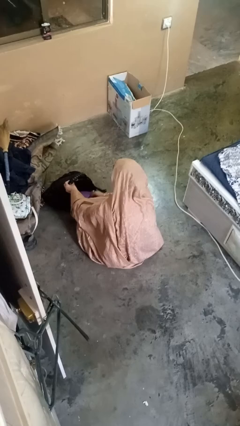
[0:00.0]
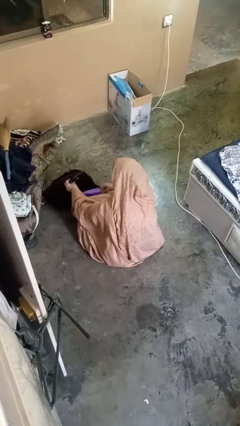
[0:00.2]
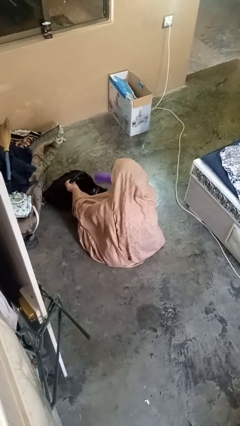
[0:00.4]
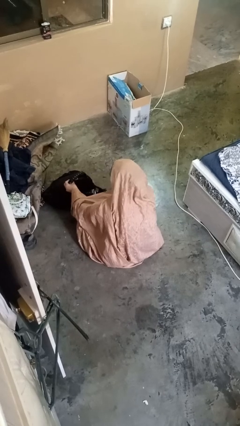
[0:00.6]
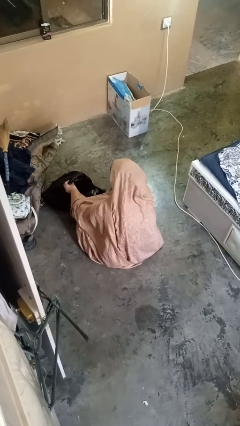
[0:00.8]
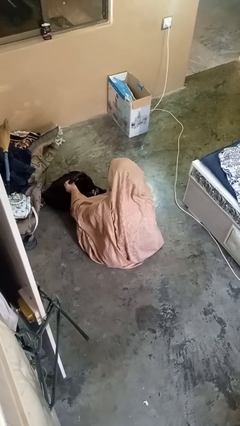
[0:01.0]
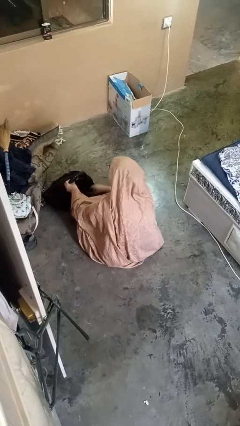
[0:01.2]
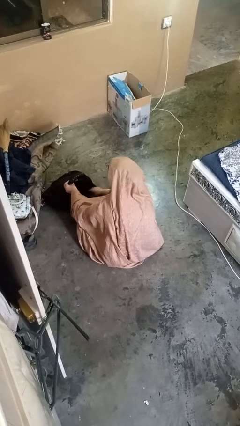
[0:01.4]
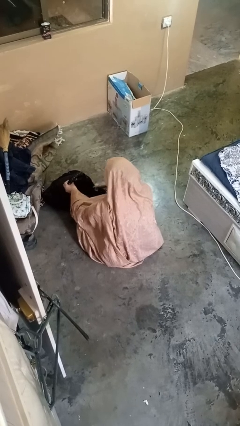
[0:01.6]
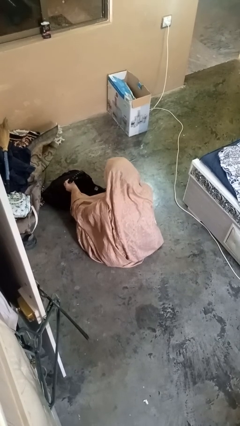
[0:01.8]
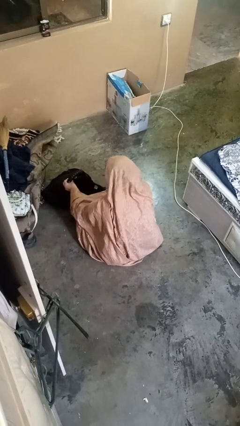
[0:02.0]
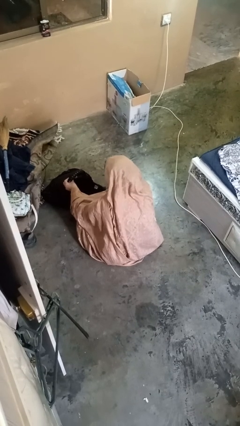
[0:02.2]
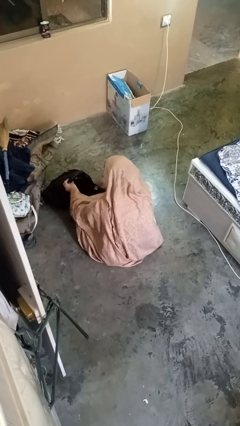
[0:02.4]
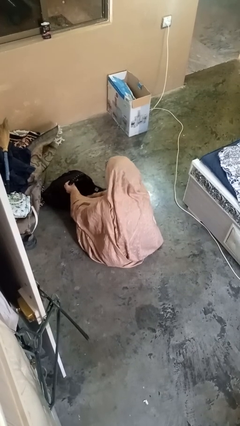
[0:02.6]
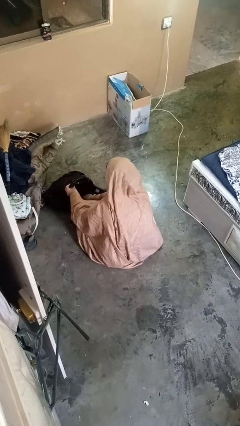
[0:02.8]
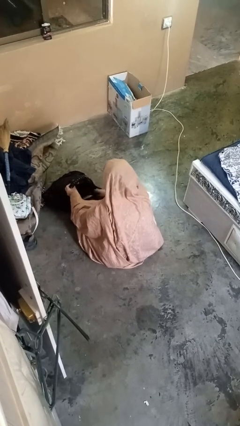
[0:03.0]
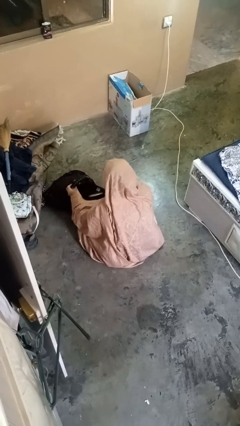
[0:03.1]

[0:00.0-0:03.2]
person takes object from backpack

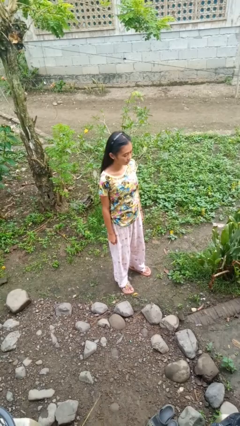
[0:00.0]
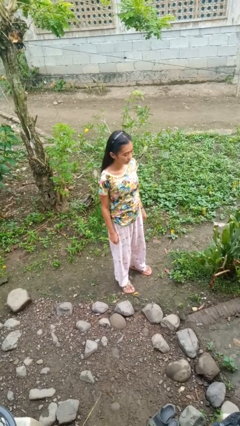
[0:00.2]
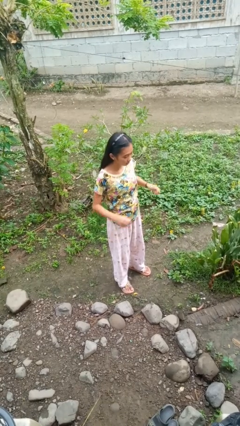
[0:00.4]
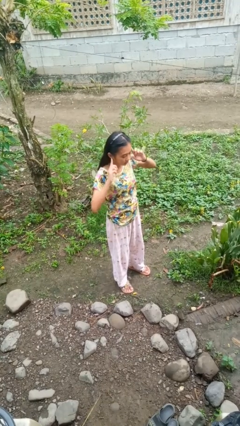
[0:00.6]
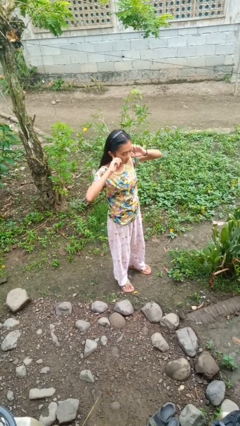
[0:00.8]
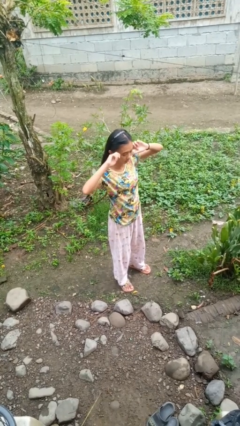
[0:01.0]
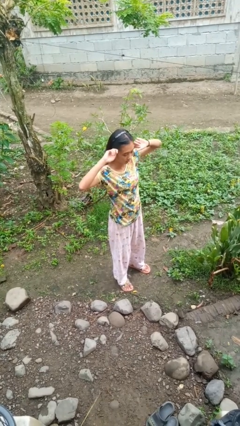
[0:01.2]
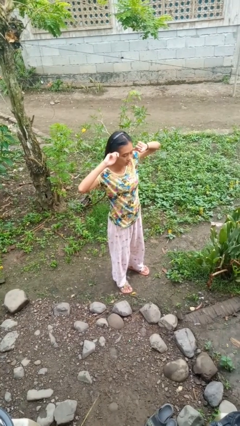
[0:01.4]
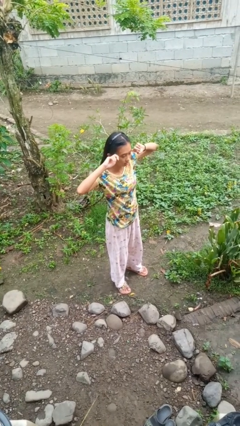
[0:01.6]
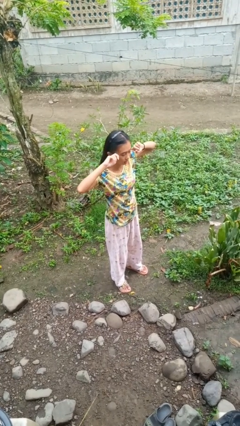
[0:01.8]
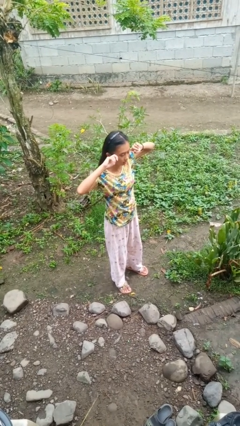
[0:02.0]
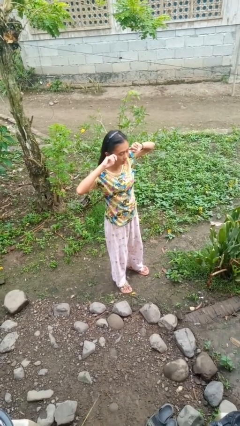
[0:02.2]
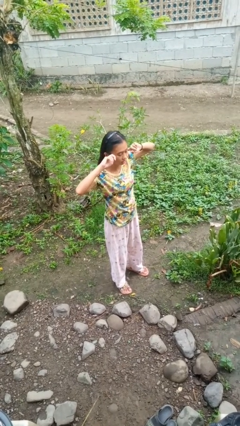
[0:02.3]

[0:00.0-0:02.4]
person puts fingers in ear

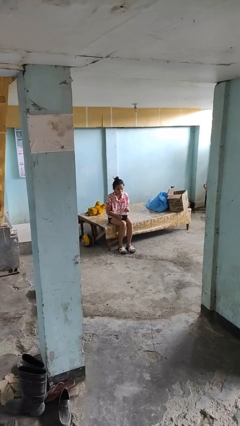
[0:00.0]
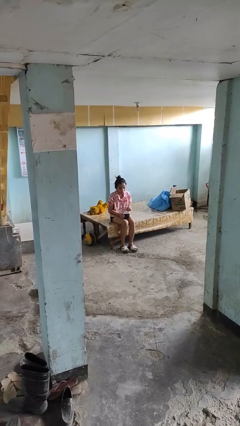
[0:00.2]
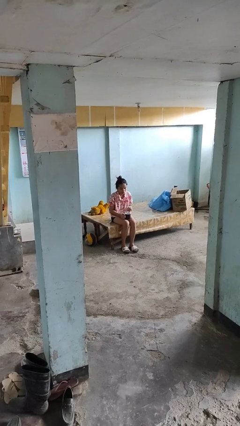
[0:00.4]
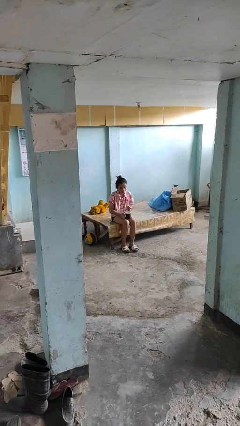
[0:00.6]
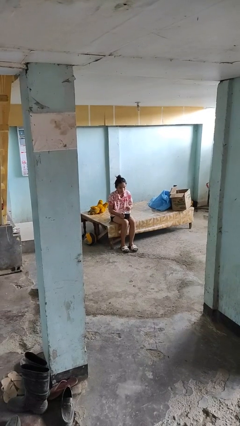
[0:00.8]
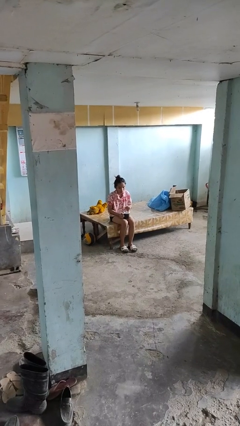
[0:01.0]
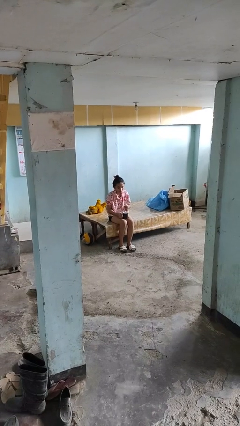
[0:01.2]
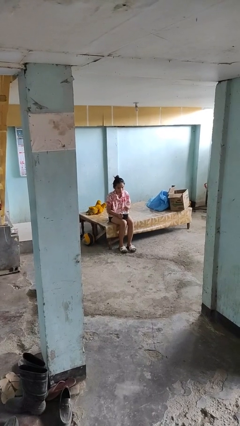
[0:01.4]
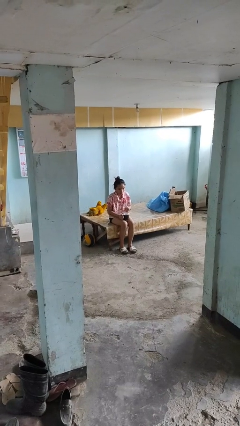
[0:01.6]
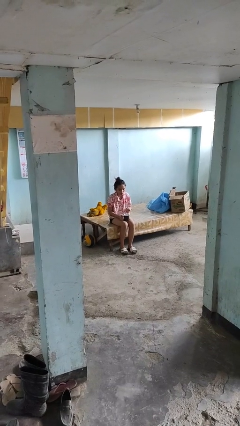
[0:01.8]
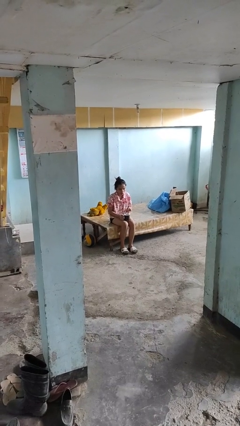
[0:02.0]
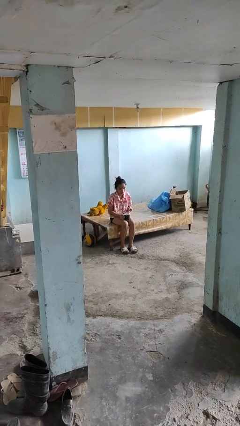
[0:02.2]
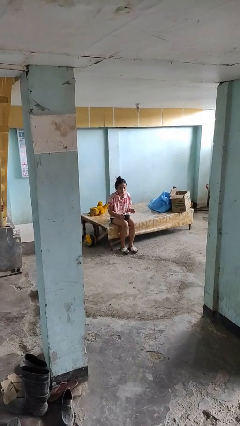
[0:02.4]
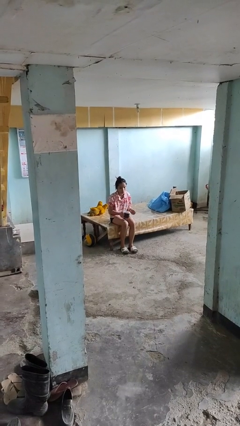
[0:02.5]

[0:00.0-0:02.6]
person stirs mug

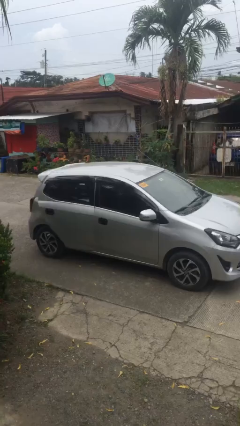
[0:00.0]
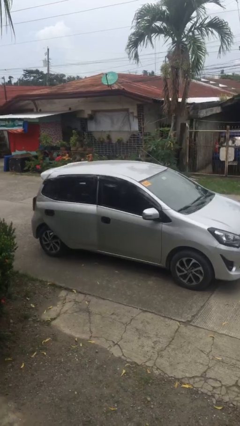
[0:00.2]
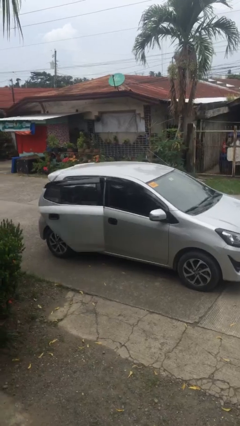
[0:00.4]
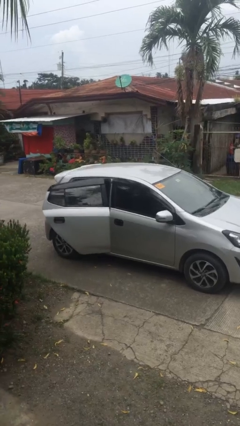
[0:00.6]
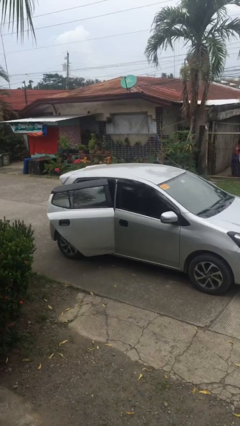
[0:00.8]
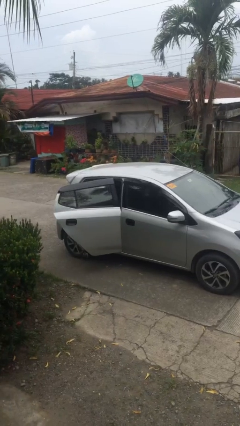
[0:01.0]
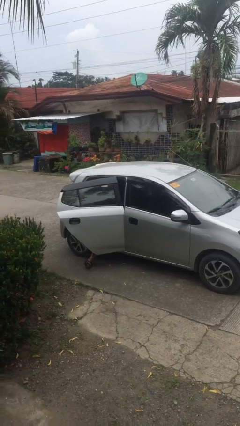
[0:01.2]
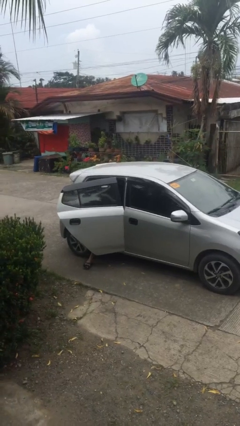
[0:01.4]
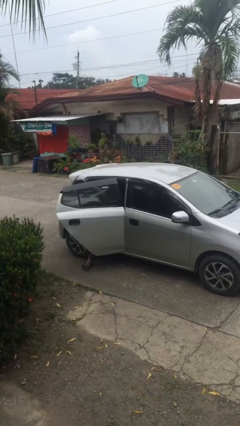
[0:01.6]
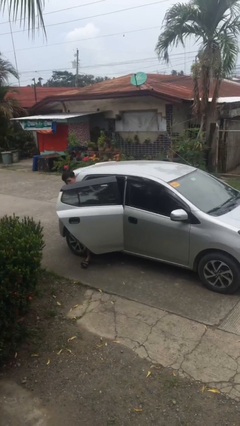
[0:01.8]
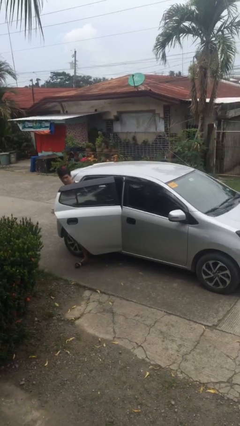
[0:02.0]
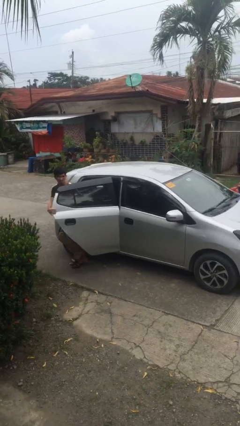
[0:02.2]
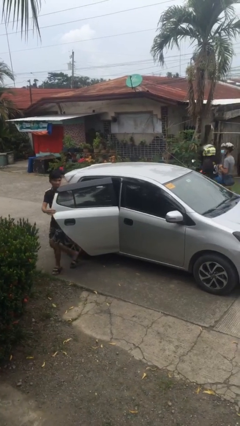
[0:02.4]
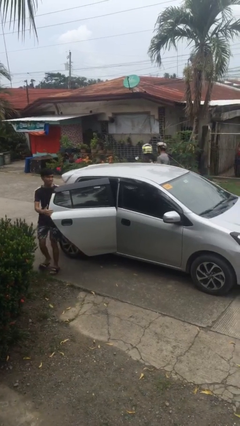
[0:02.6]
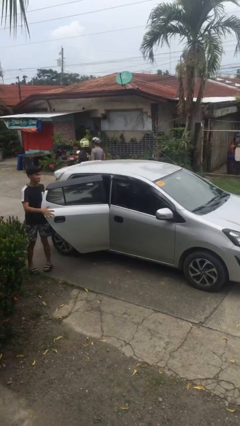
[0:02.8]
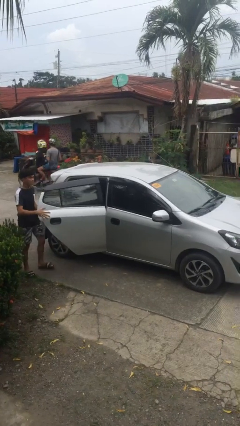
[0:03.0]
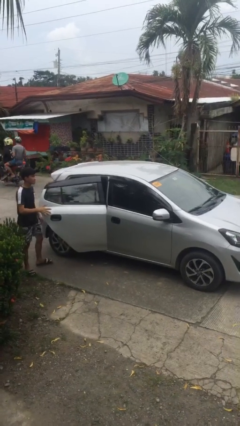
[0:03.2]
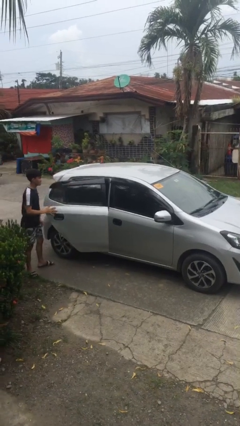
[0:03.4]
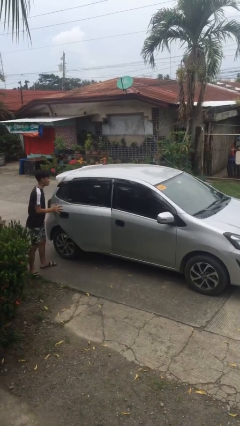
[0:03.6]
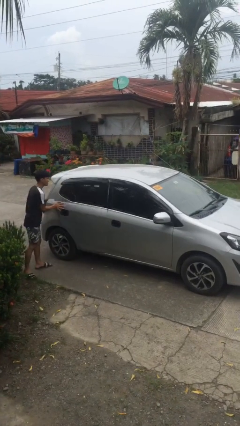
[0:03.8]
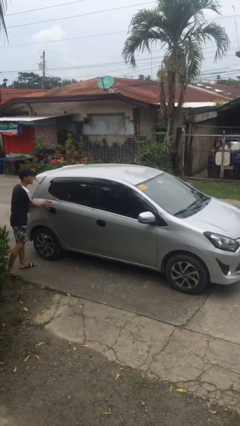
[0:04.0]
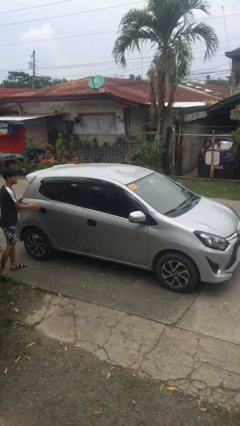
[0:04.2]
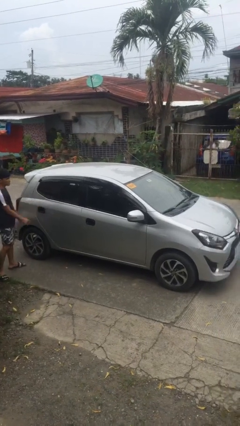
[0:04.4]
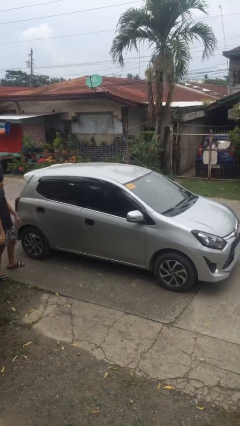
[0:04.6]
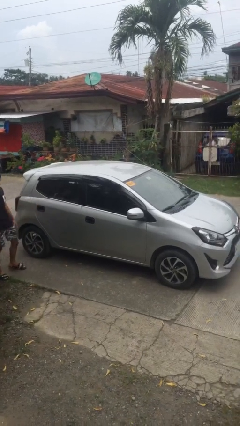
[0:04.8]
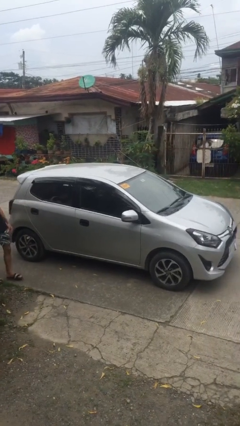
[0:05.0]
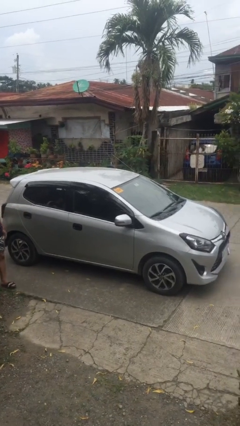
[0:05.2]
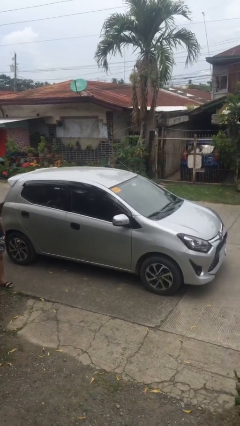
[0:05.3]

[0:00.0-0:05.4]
car drops off person

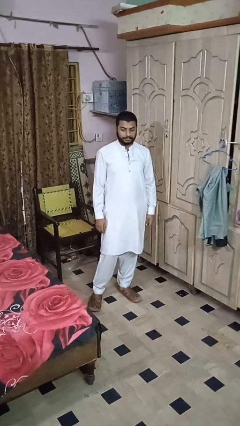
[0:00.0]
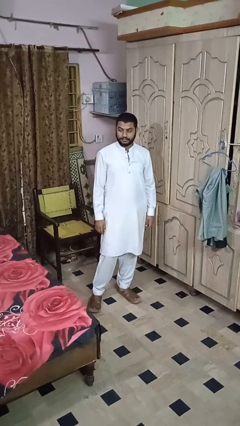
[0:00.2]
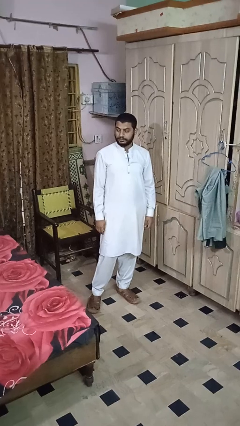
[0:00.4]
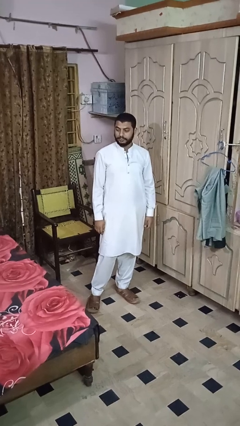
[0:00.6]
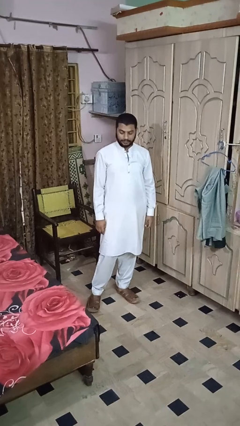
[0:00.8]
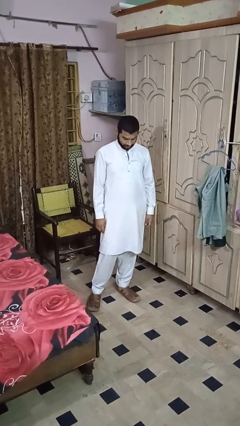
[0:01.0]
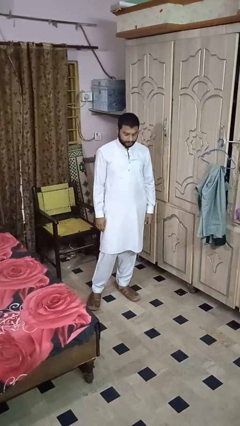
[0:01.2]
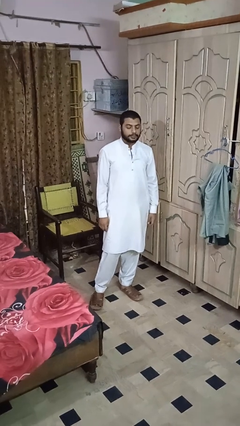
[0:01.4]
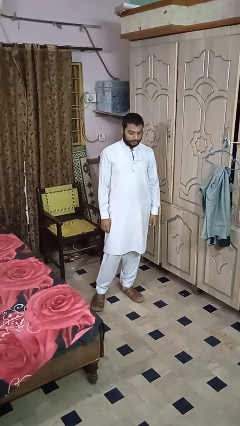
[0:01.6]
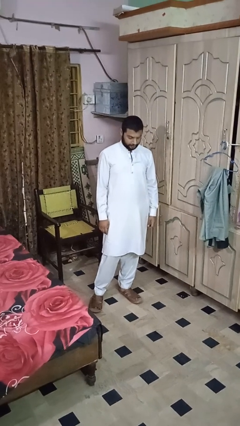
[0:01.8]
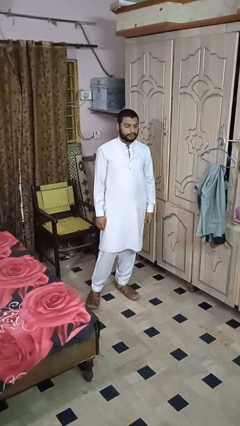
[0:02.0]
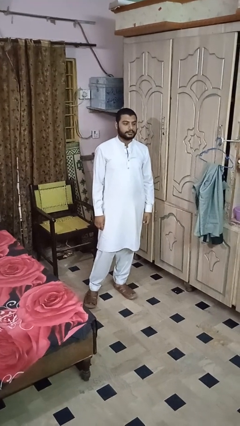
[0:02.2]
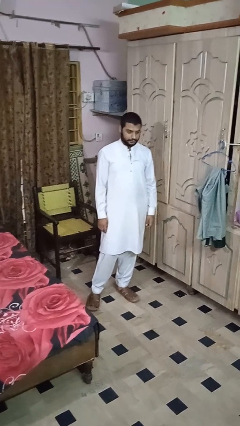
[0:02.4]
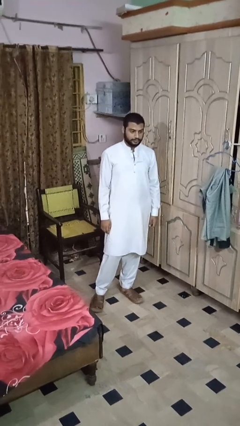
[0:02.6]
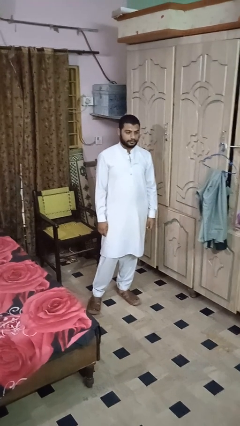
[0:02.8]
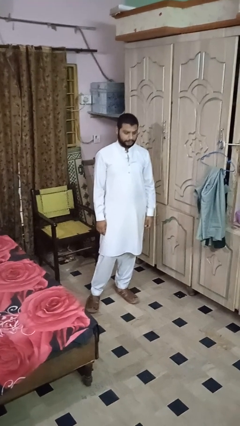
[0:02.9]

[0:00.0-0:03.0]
person nods head

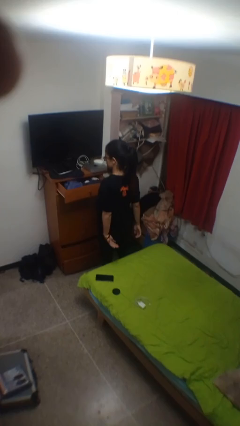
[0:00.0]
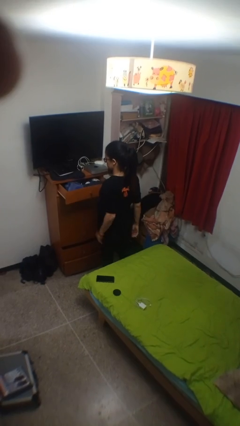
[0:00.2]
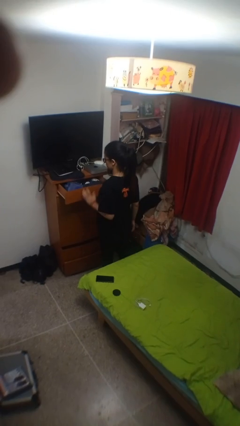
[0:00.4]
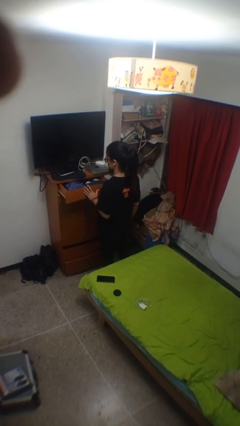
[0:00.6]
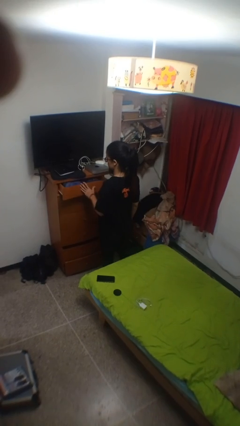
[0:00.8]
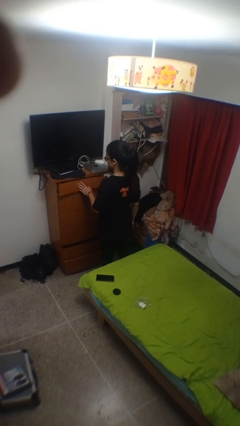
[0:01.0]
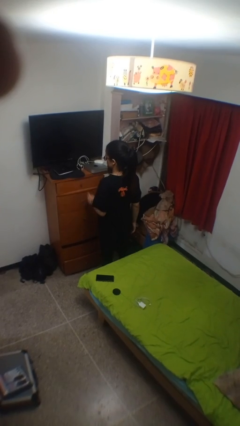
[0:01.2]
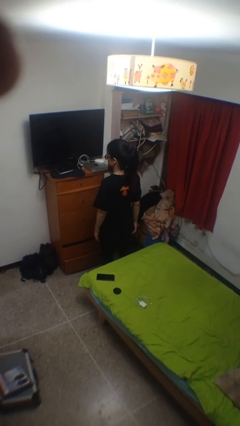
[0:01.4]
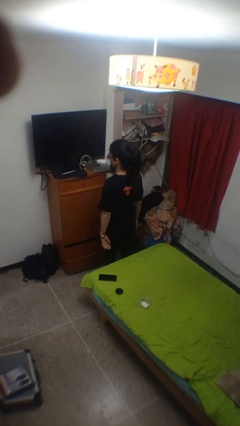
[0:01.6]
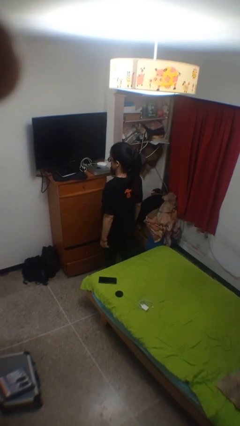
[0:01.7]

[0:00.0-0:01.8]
person closes dresser drawer
